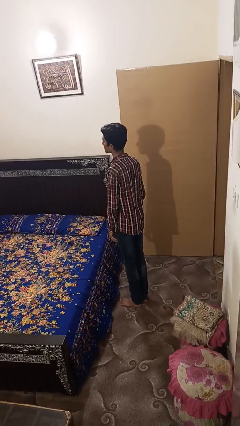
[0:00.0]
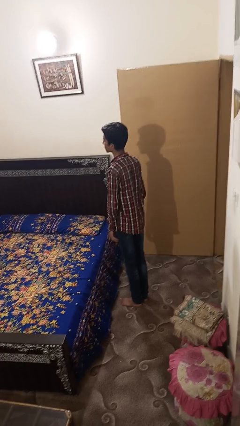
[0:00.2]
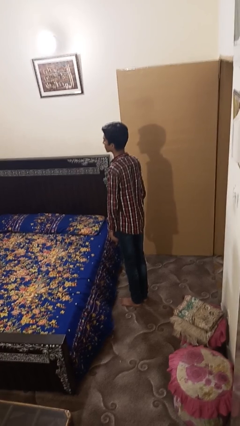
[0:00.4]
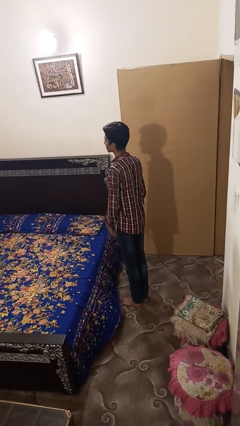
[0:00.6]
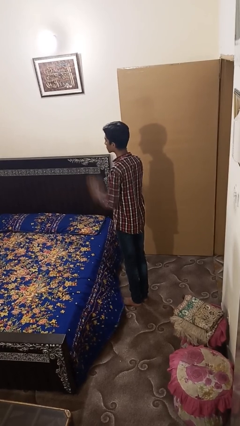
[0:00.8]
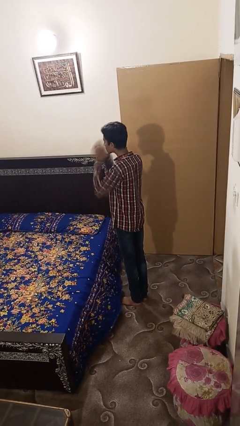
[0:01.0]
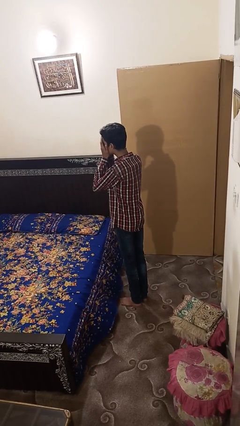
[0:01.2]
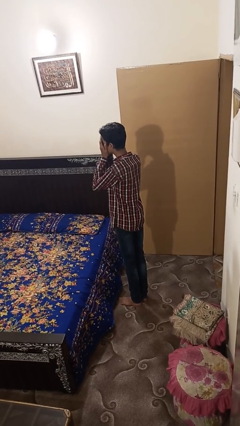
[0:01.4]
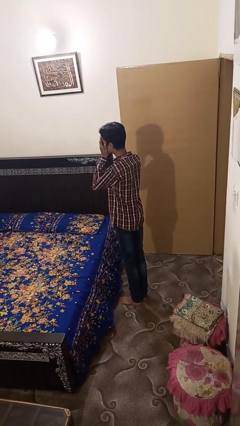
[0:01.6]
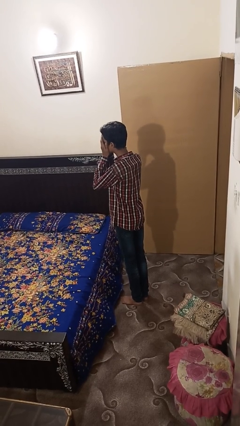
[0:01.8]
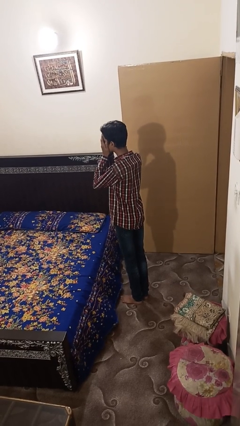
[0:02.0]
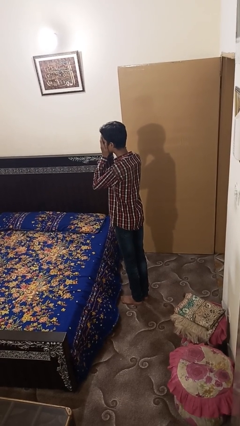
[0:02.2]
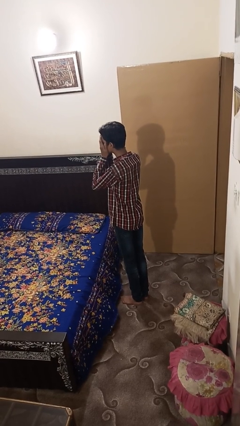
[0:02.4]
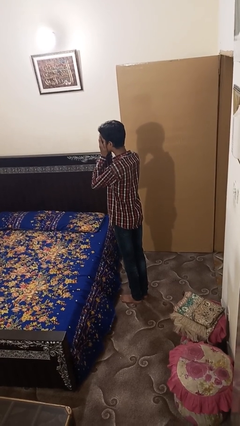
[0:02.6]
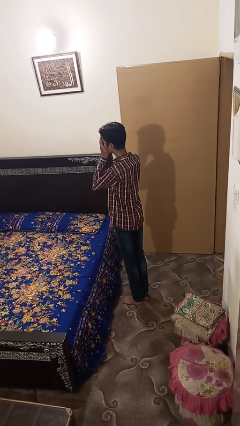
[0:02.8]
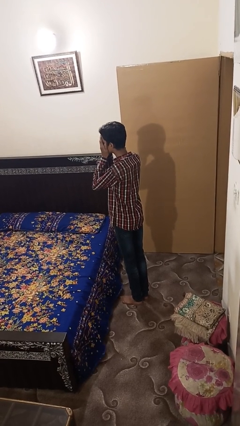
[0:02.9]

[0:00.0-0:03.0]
person covers face with hands

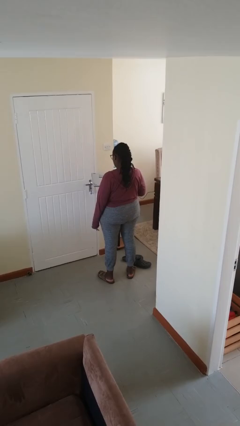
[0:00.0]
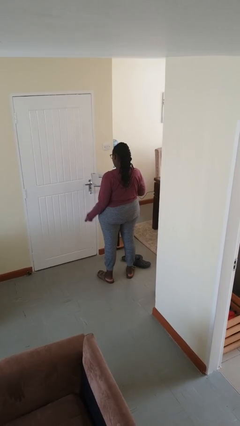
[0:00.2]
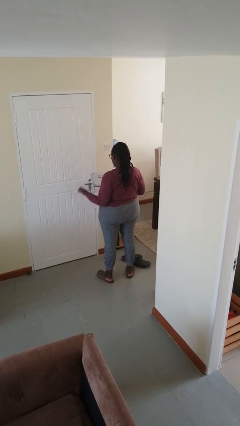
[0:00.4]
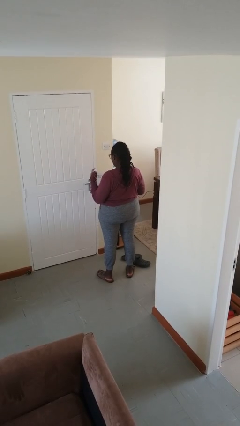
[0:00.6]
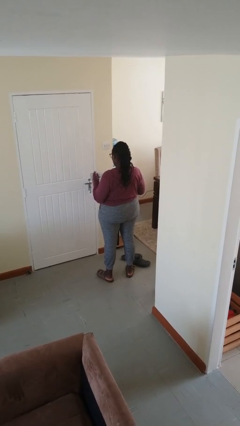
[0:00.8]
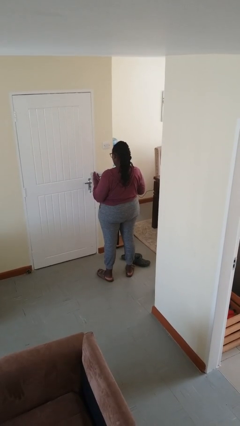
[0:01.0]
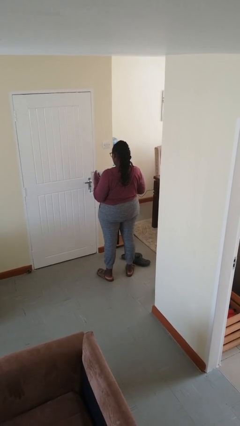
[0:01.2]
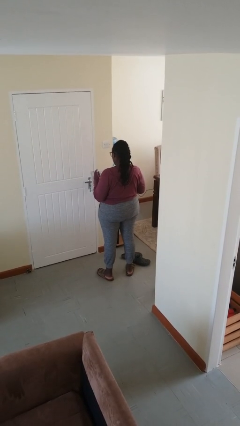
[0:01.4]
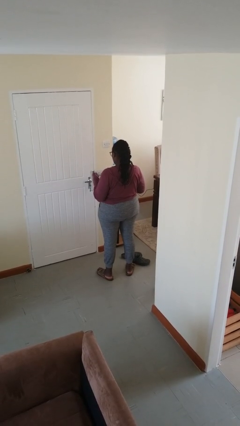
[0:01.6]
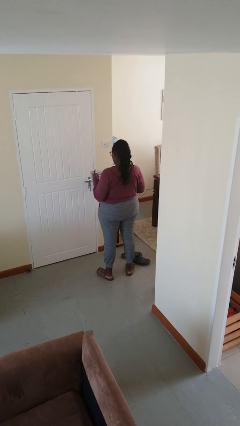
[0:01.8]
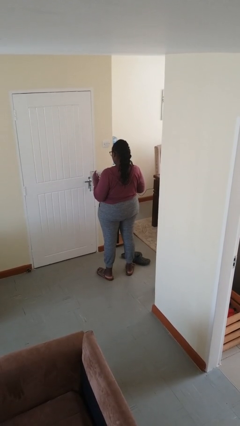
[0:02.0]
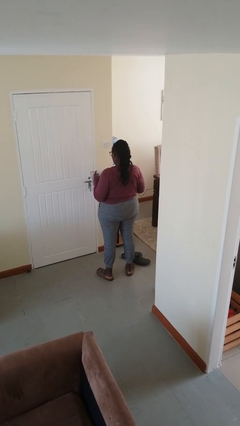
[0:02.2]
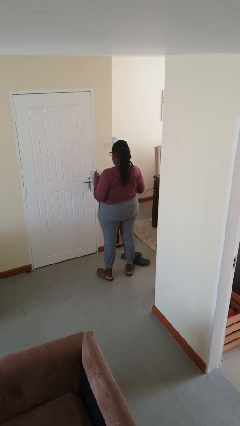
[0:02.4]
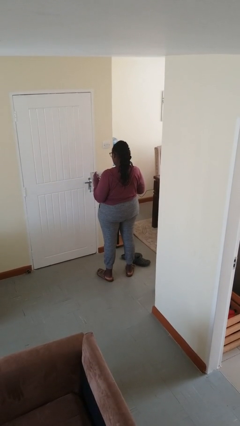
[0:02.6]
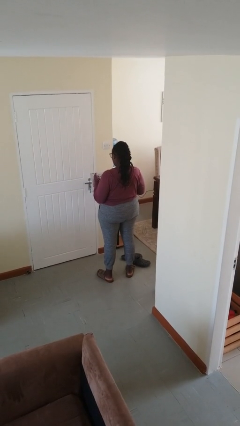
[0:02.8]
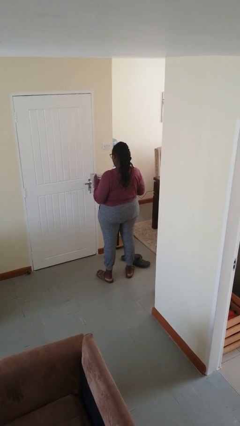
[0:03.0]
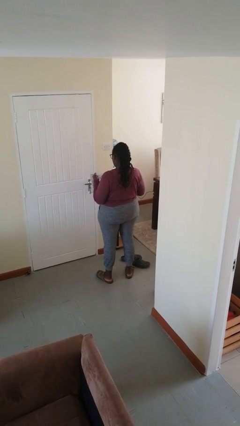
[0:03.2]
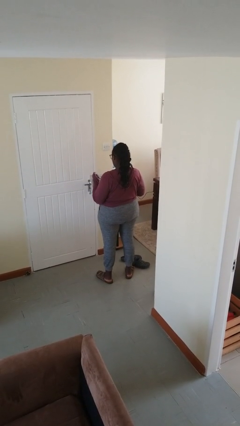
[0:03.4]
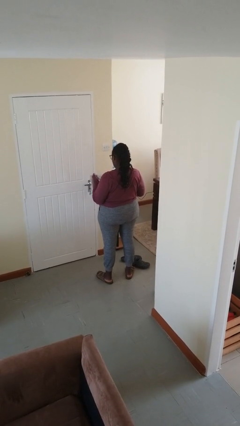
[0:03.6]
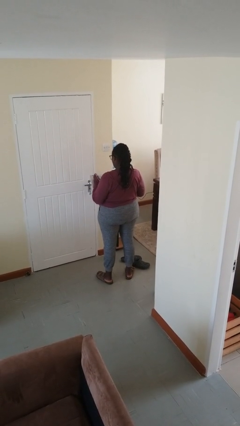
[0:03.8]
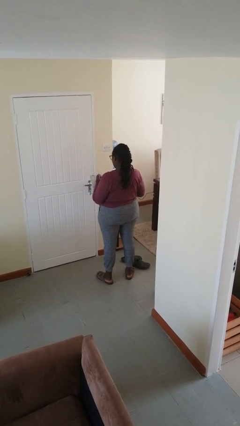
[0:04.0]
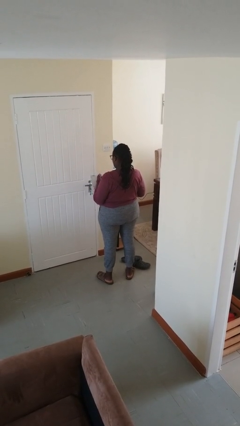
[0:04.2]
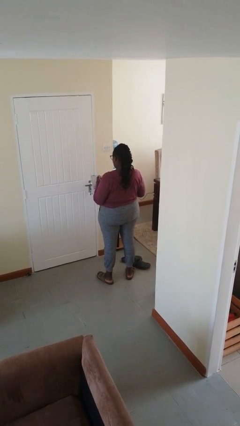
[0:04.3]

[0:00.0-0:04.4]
person taps object with finger

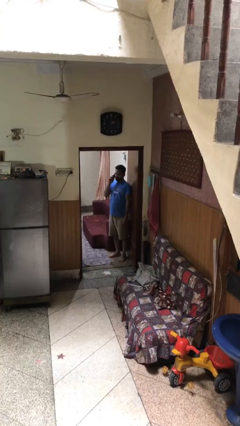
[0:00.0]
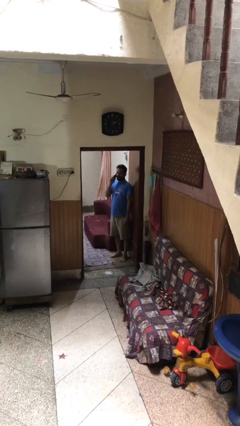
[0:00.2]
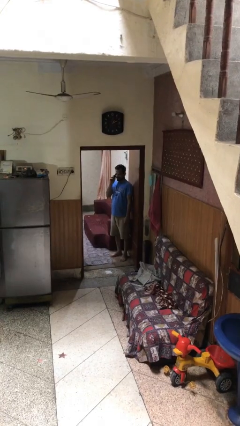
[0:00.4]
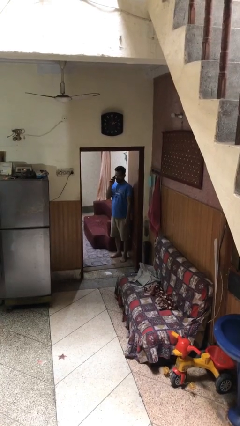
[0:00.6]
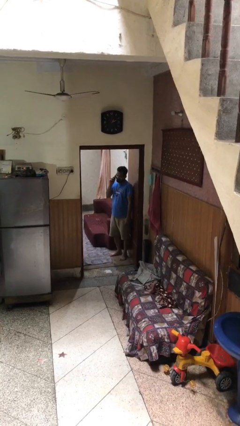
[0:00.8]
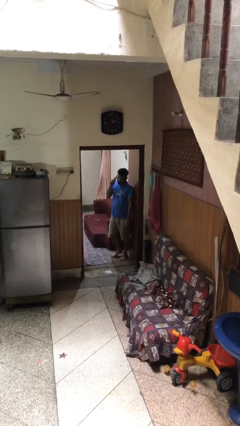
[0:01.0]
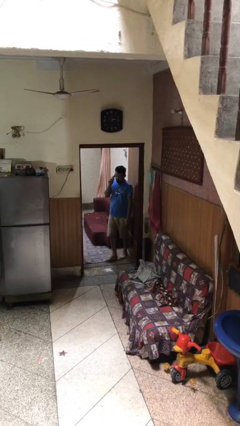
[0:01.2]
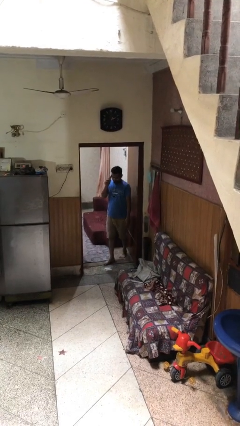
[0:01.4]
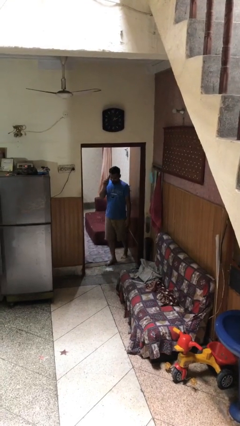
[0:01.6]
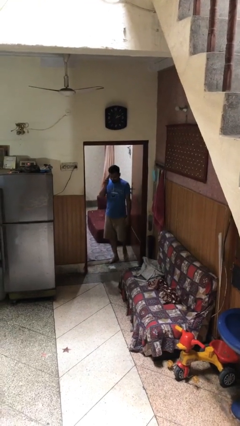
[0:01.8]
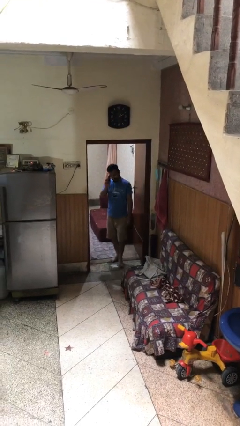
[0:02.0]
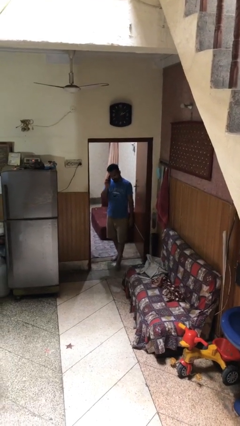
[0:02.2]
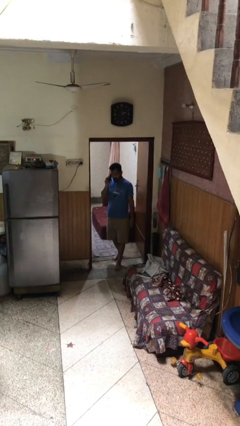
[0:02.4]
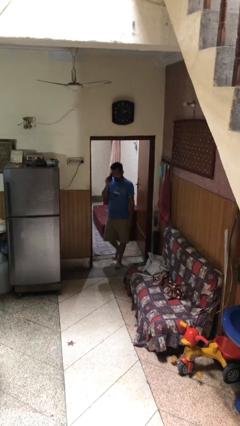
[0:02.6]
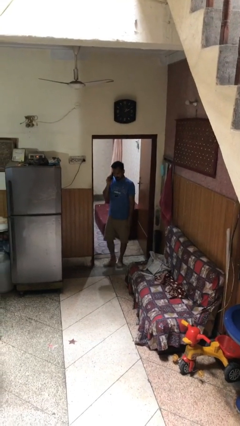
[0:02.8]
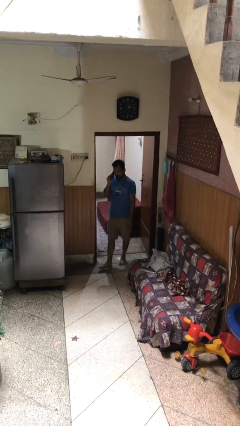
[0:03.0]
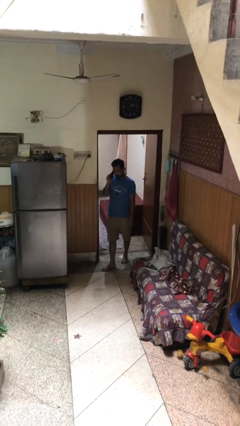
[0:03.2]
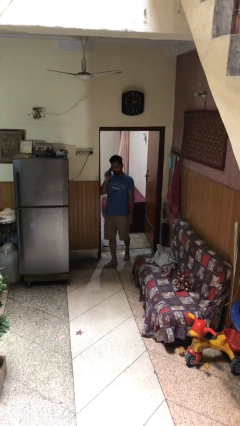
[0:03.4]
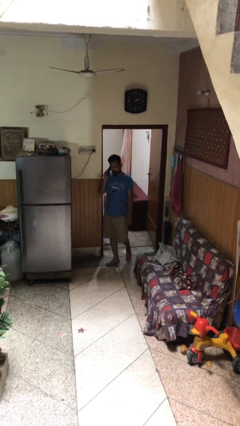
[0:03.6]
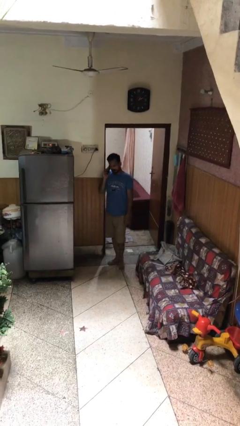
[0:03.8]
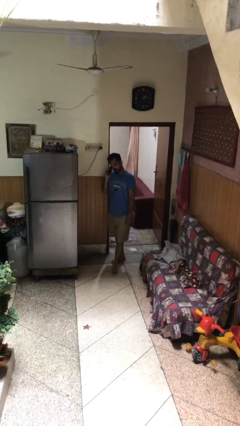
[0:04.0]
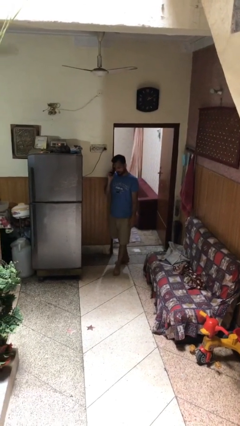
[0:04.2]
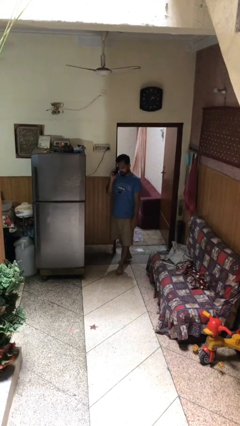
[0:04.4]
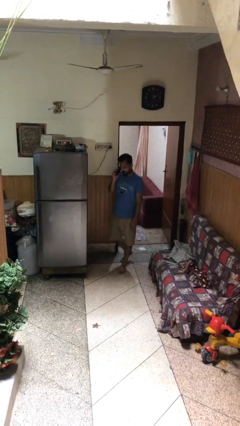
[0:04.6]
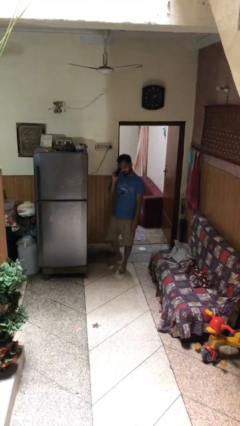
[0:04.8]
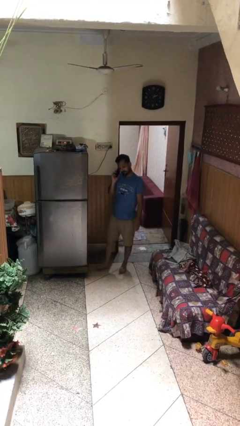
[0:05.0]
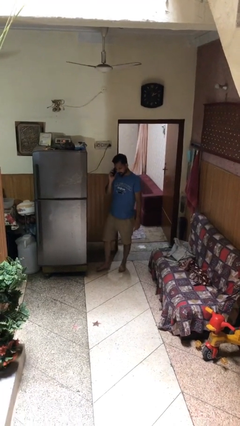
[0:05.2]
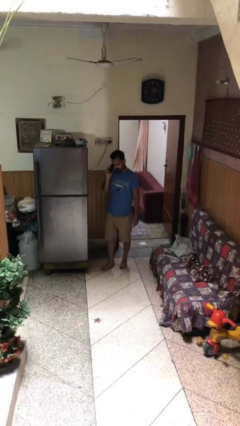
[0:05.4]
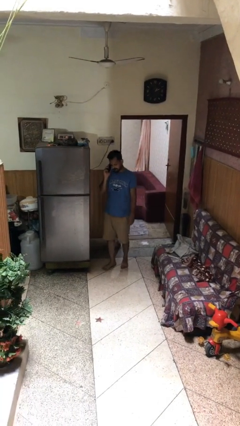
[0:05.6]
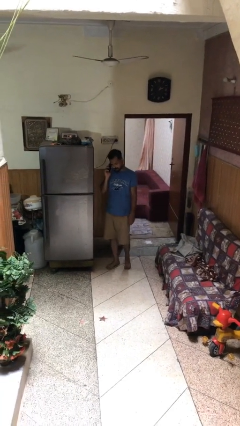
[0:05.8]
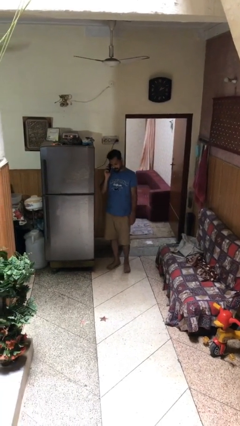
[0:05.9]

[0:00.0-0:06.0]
person enters scene through structure

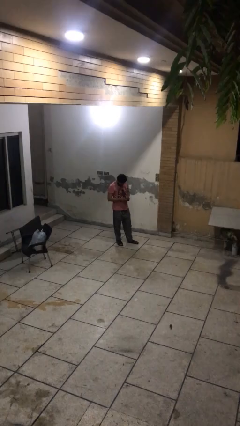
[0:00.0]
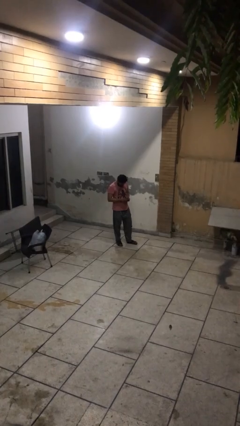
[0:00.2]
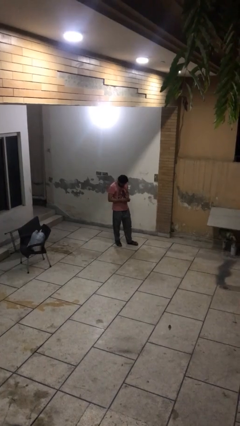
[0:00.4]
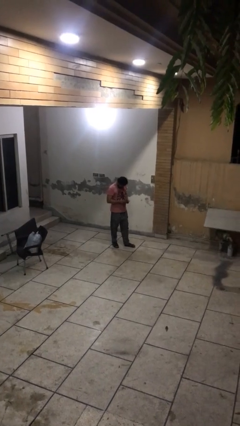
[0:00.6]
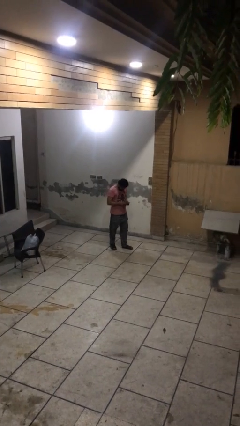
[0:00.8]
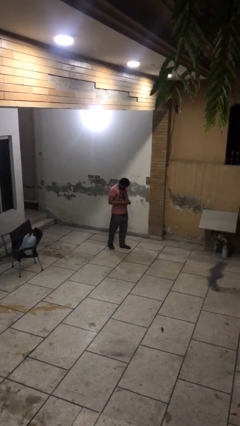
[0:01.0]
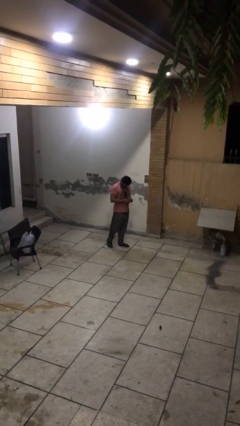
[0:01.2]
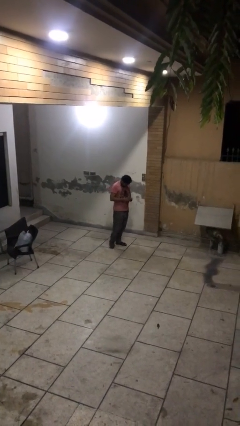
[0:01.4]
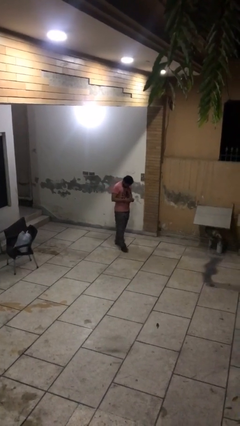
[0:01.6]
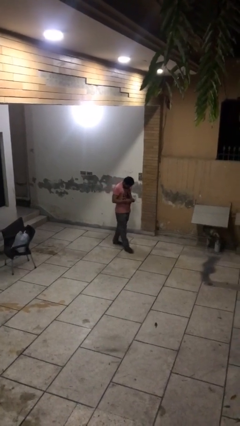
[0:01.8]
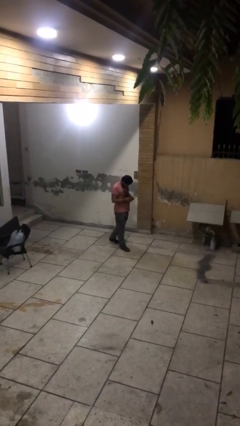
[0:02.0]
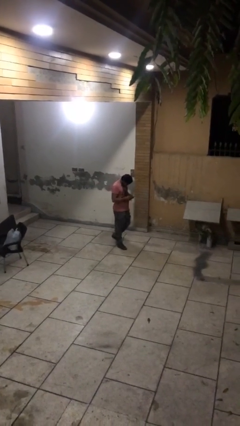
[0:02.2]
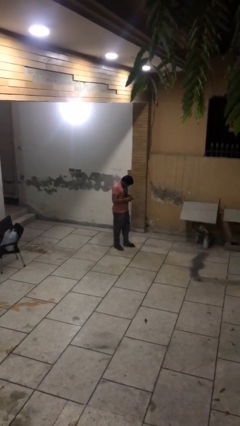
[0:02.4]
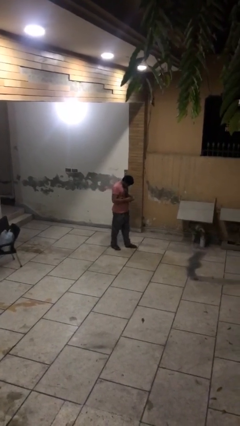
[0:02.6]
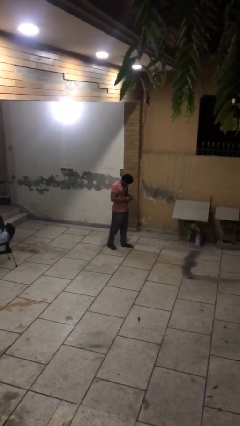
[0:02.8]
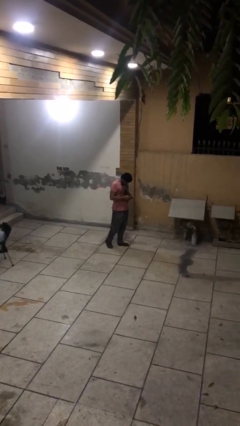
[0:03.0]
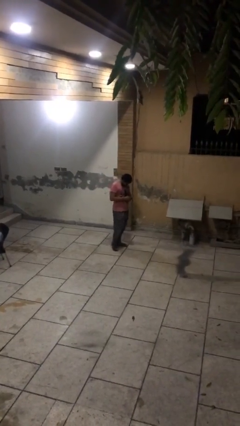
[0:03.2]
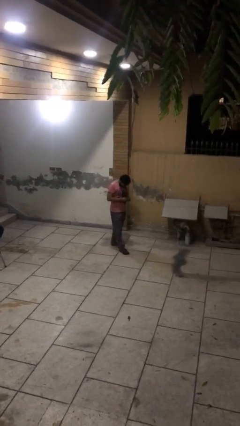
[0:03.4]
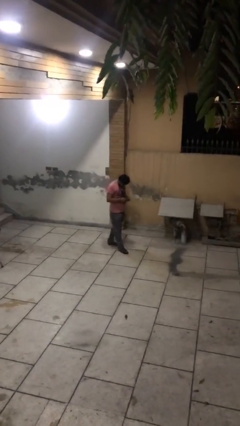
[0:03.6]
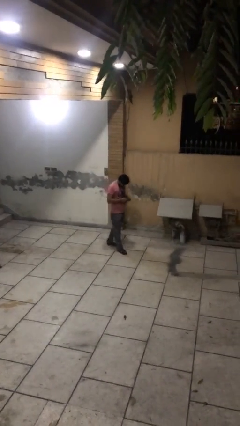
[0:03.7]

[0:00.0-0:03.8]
person texts on phone

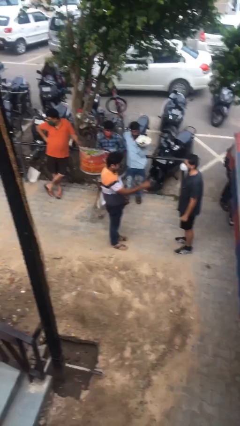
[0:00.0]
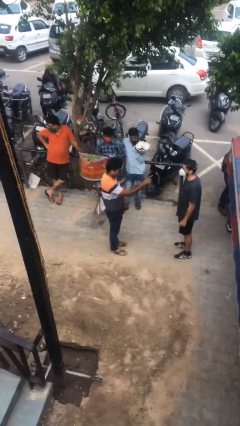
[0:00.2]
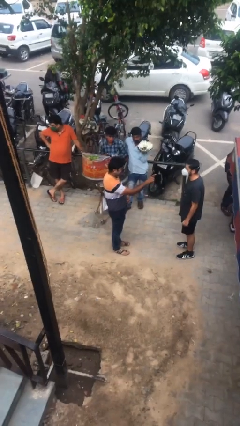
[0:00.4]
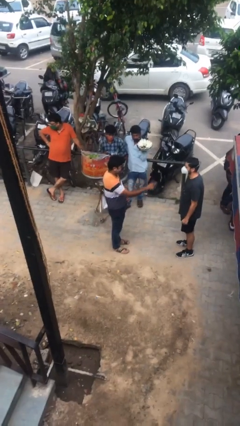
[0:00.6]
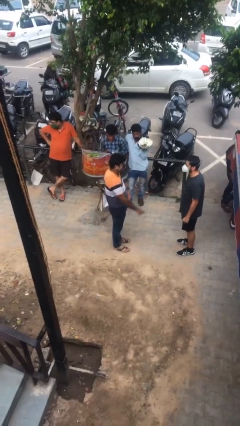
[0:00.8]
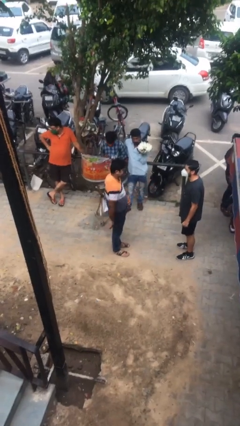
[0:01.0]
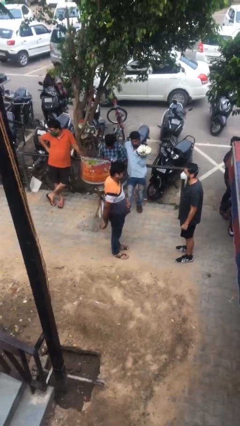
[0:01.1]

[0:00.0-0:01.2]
person points at person
